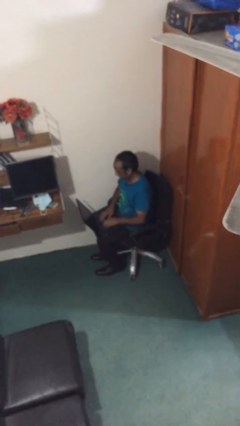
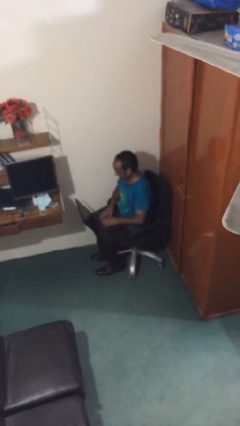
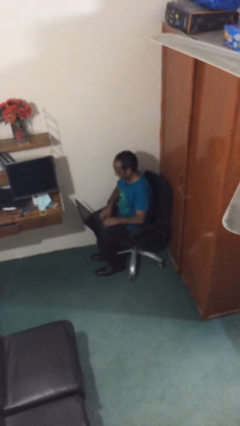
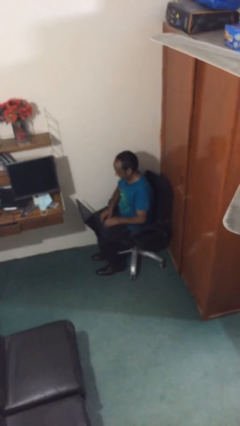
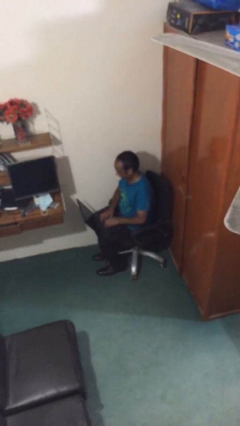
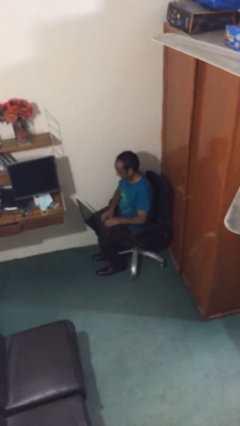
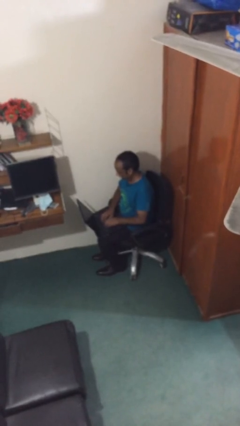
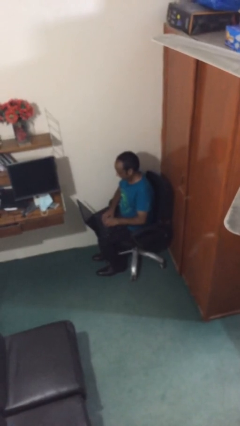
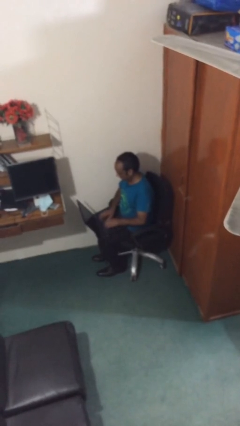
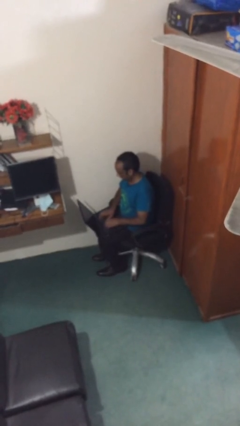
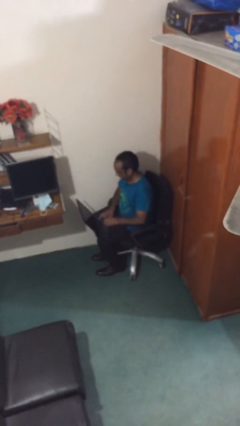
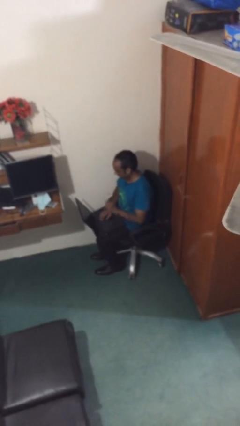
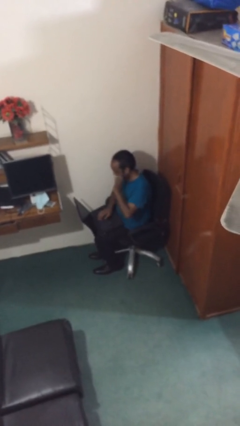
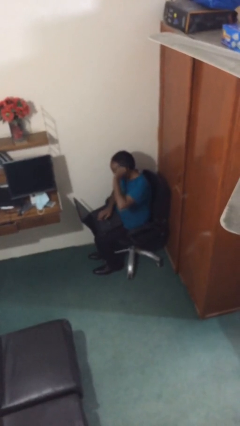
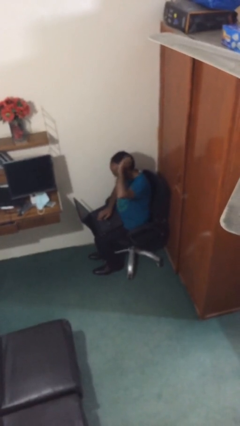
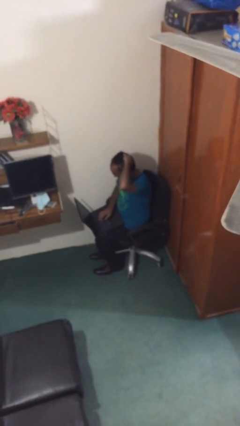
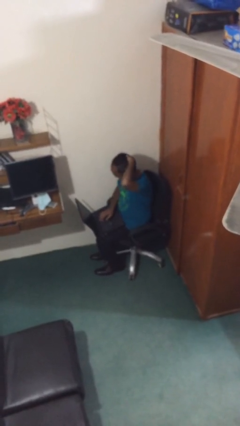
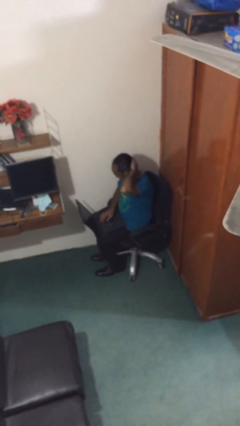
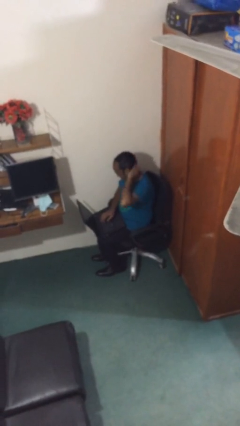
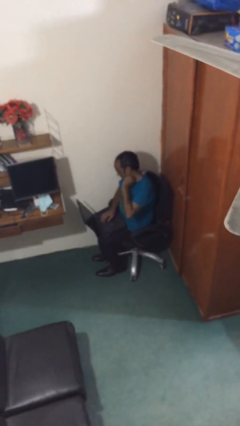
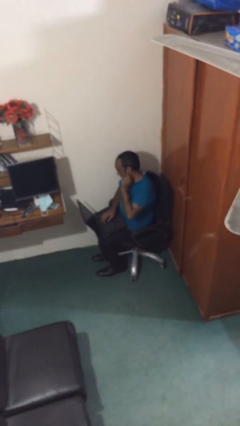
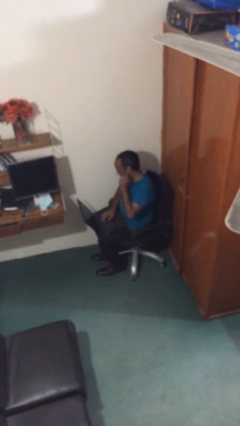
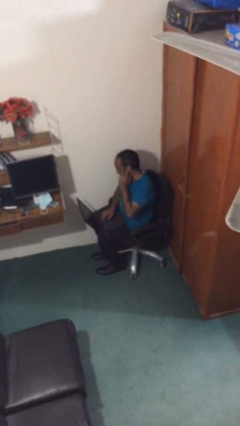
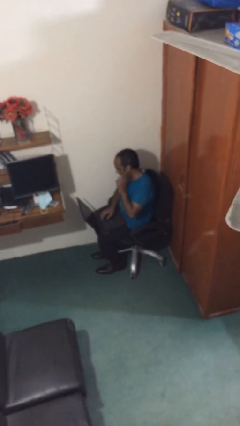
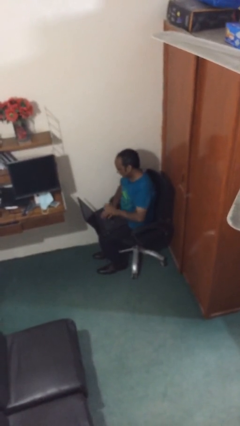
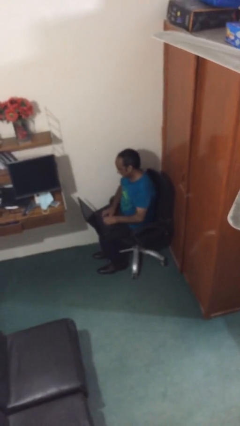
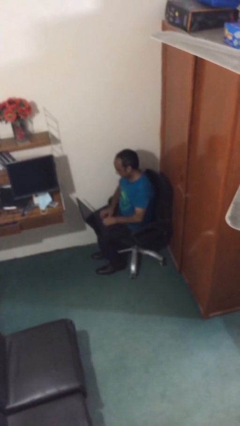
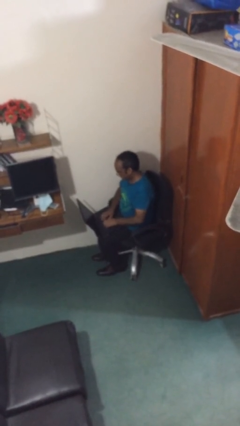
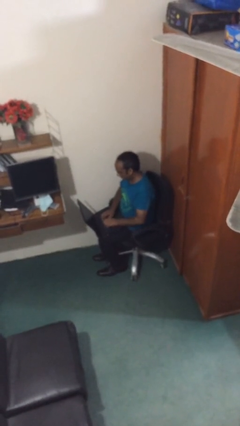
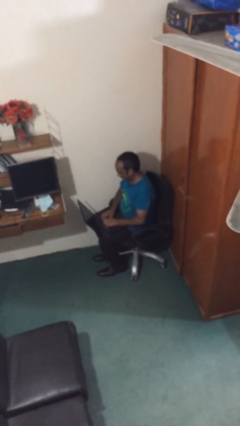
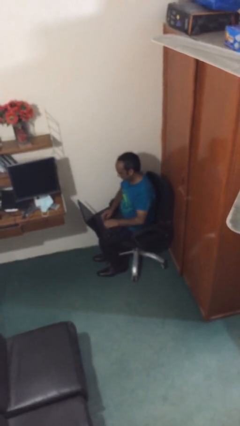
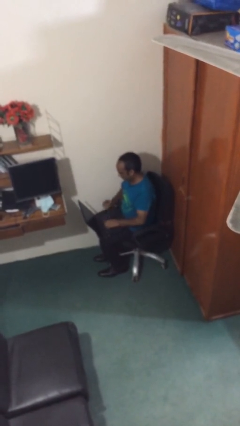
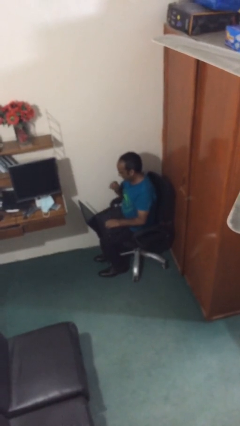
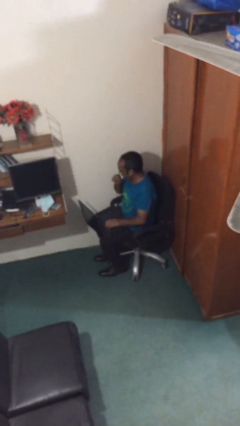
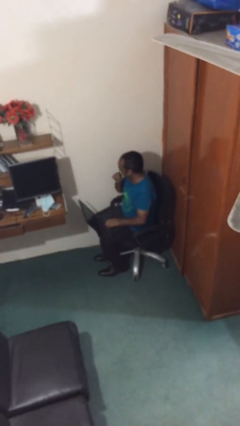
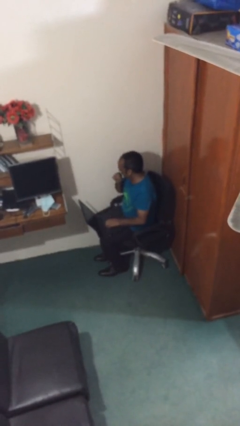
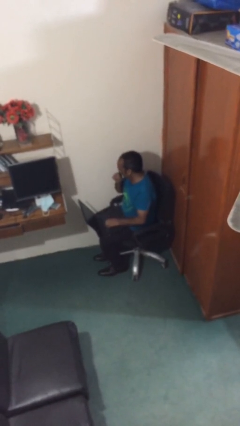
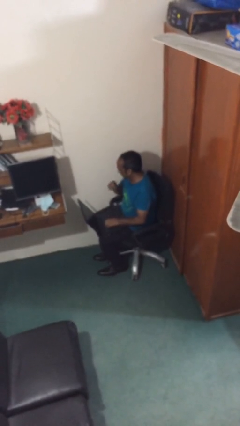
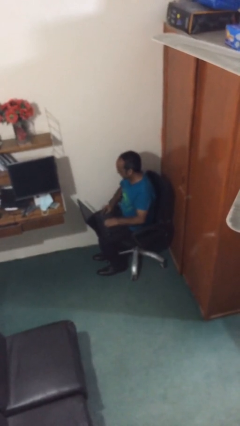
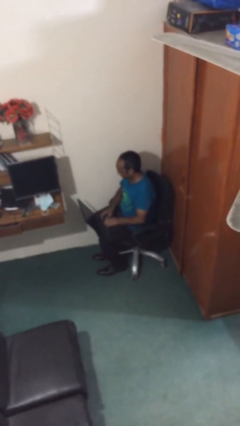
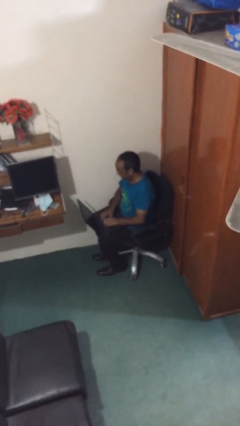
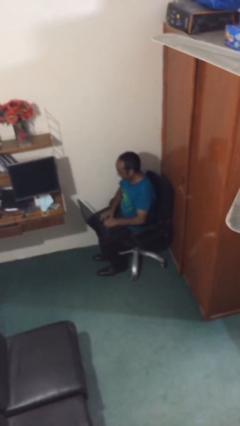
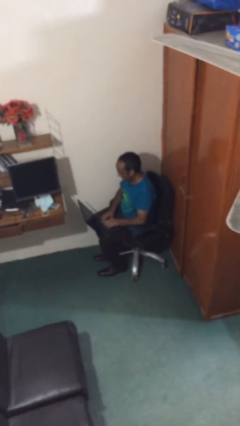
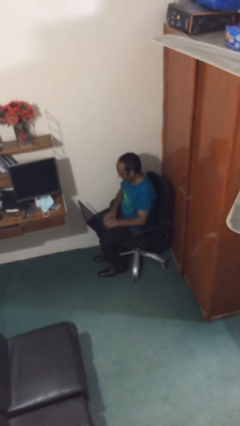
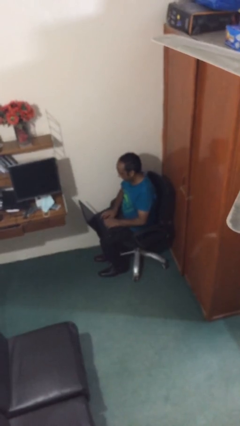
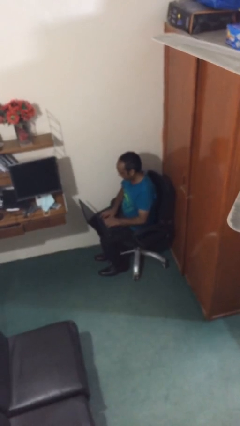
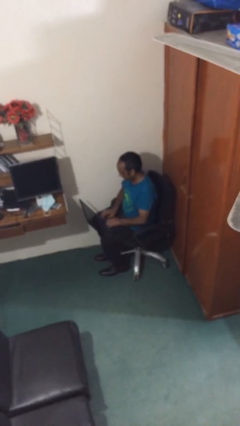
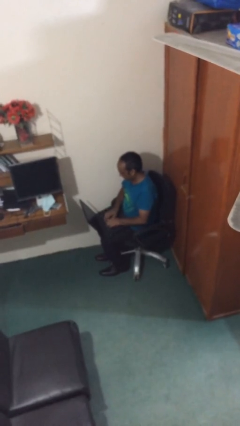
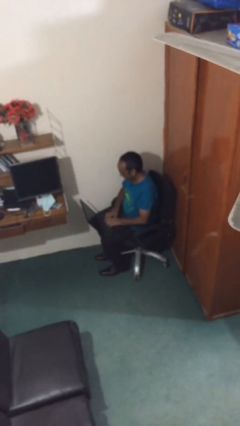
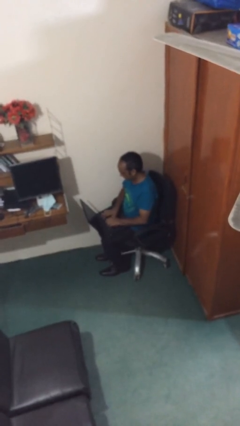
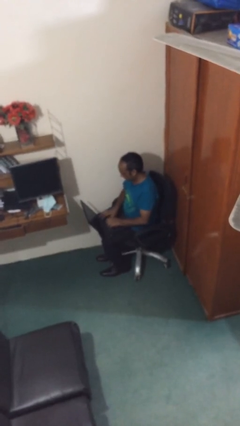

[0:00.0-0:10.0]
person interacts with laptop

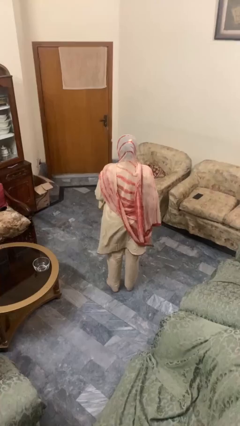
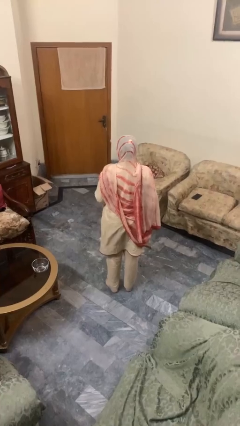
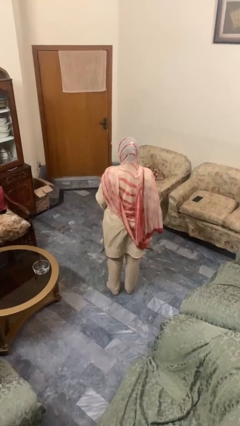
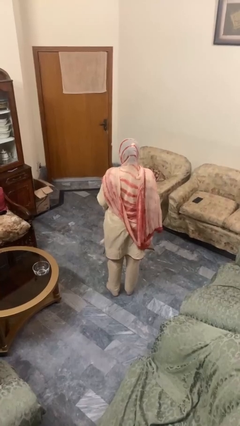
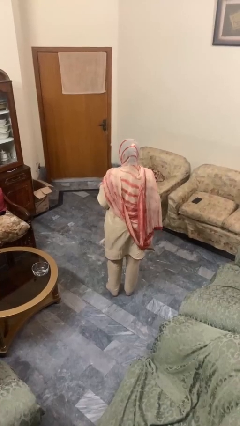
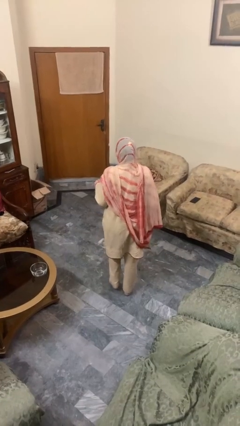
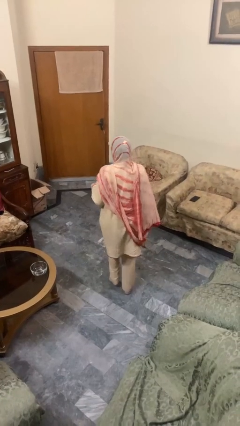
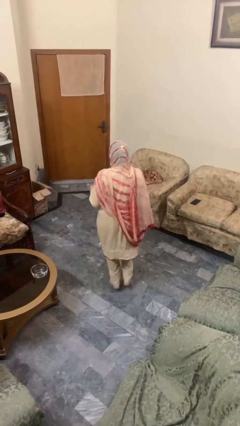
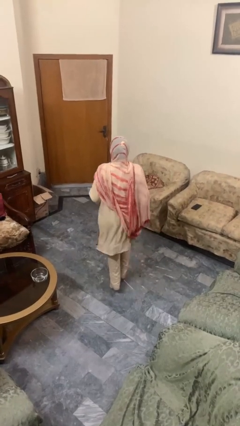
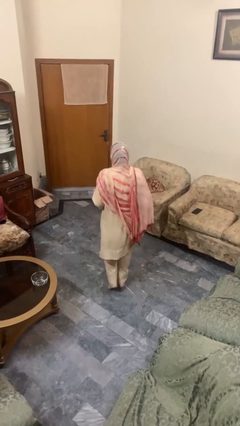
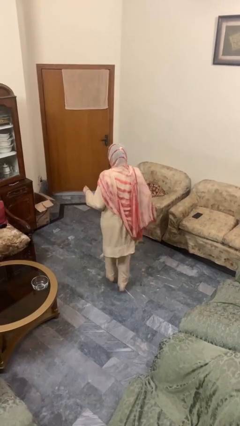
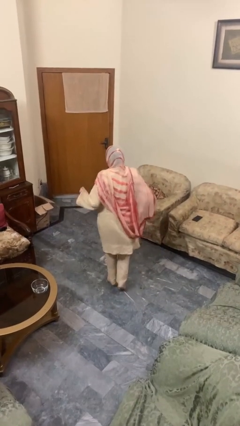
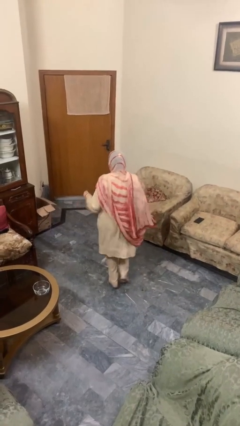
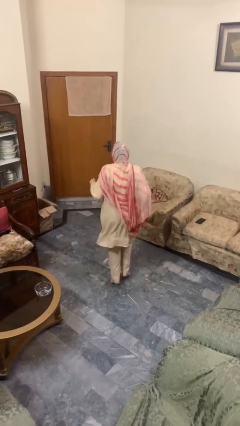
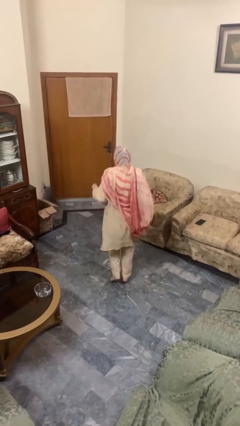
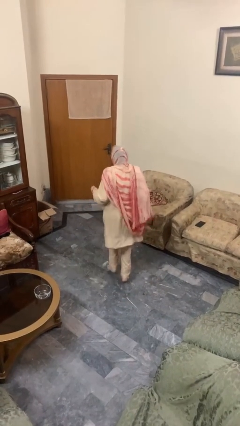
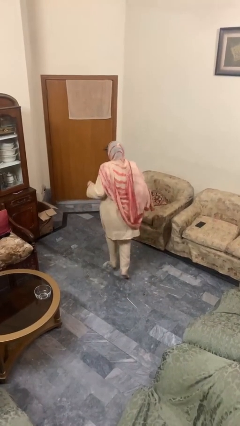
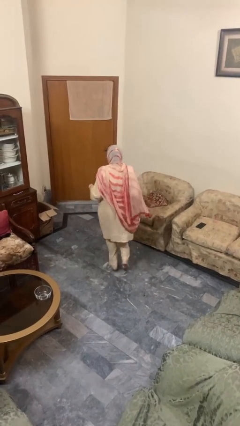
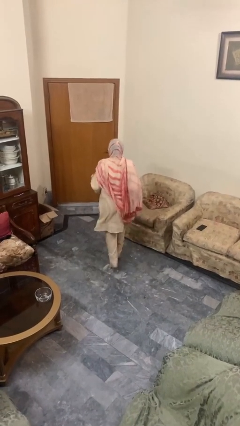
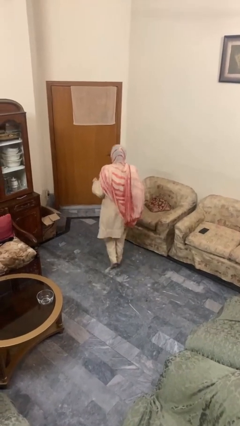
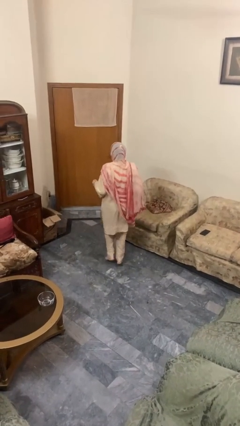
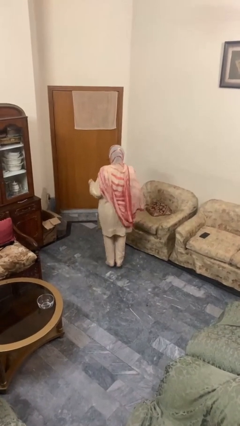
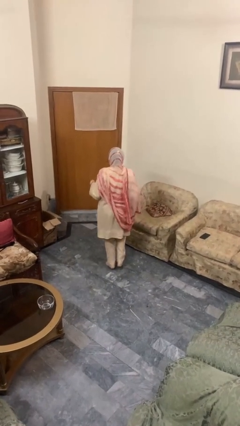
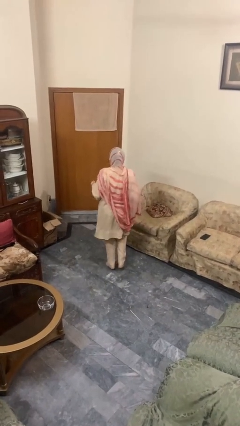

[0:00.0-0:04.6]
person walks tiptoe

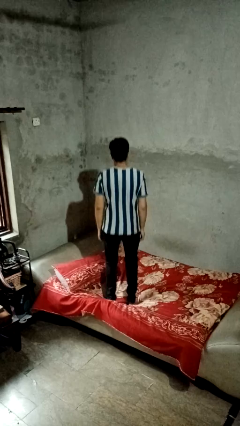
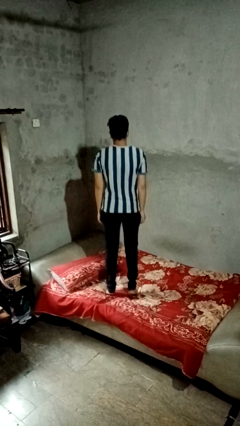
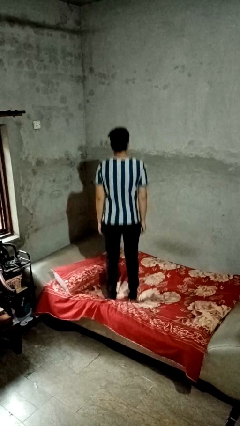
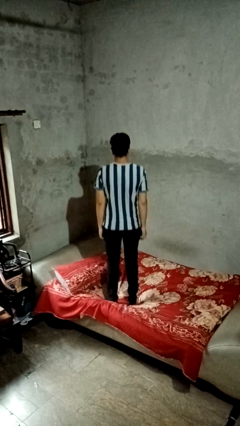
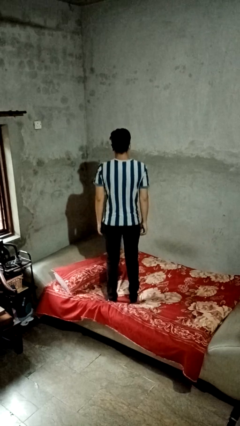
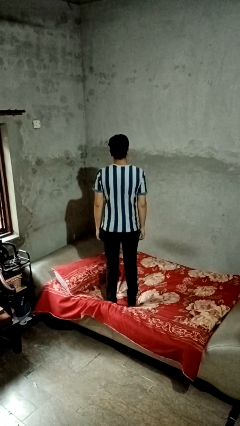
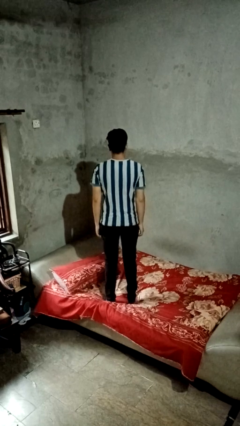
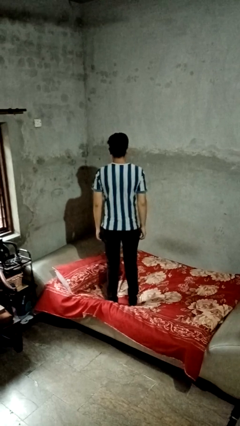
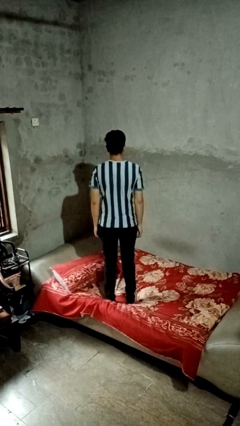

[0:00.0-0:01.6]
person jumps on bed

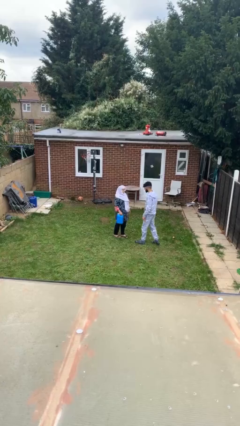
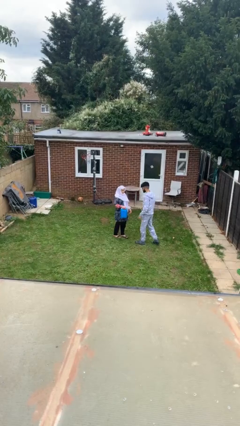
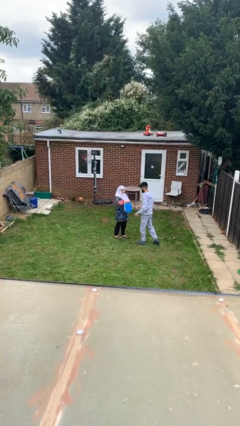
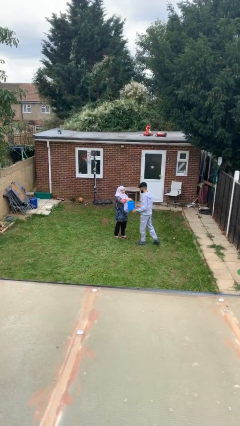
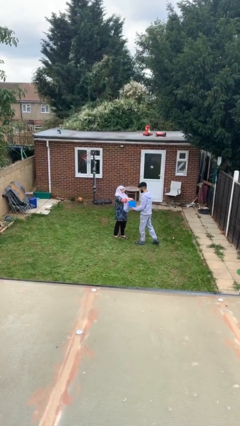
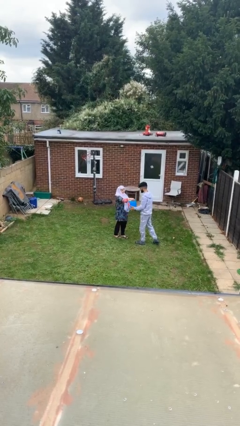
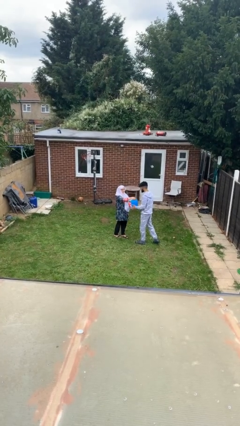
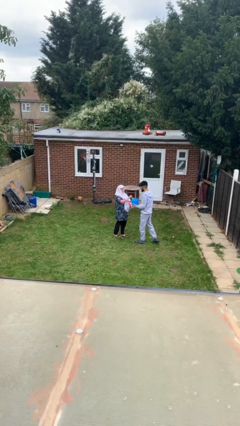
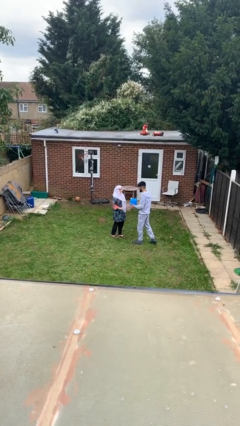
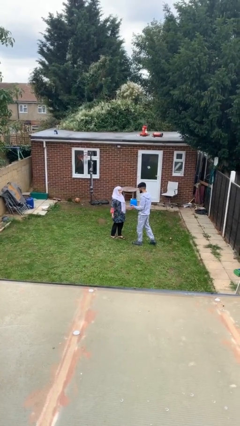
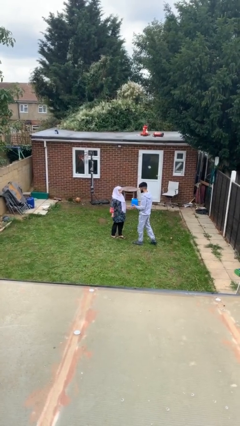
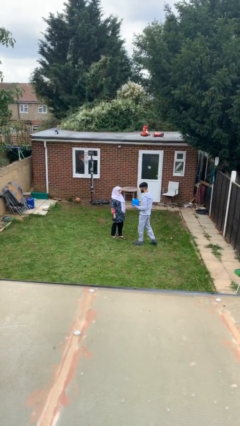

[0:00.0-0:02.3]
person transfers object to person
